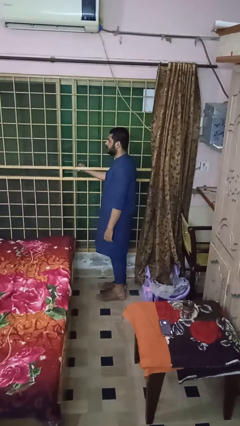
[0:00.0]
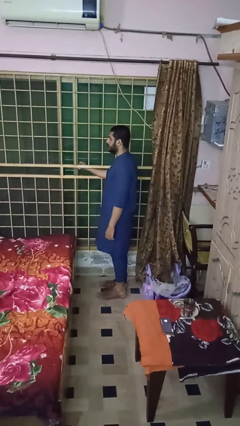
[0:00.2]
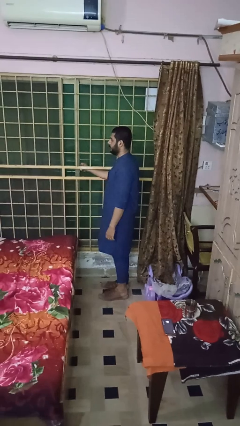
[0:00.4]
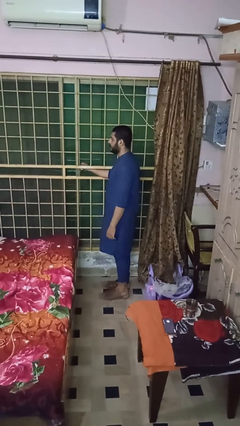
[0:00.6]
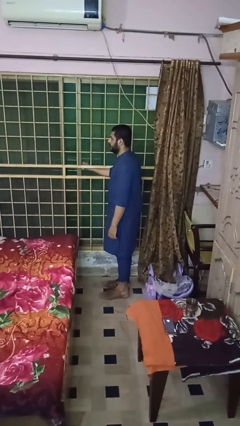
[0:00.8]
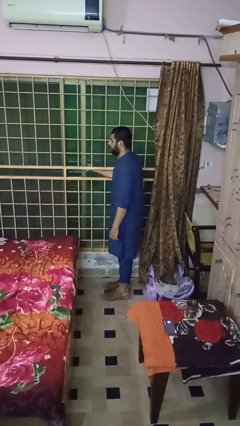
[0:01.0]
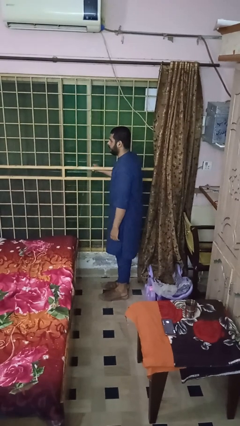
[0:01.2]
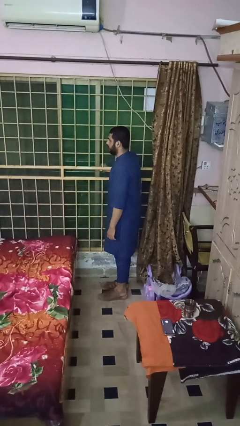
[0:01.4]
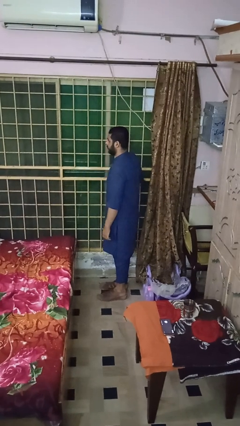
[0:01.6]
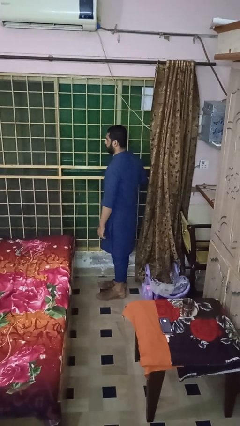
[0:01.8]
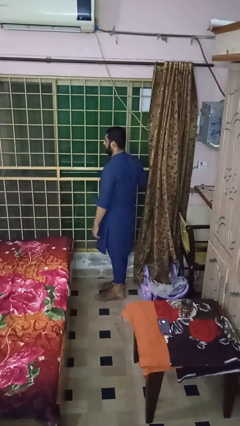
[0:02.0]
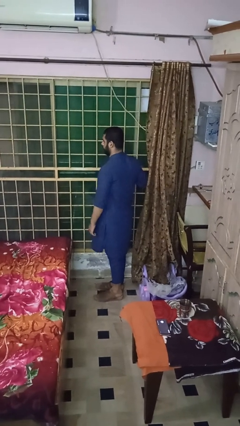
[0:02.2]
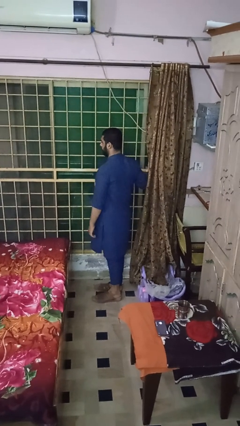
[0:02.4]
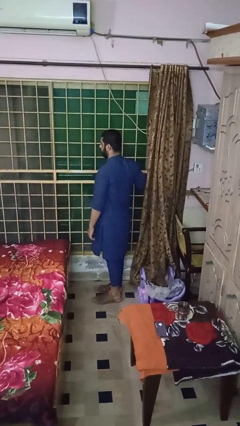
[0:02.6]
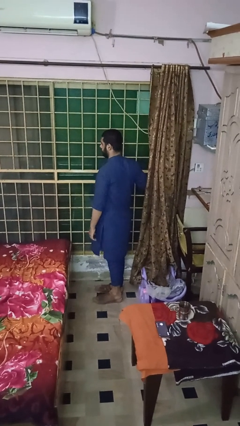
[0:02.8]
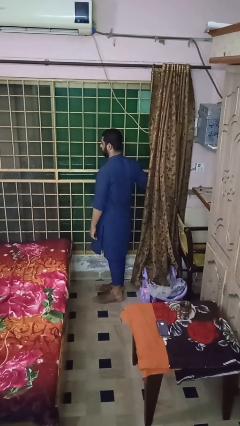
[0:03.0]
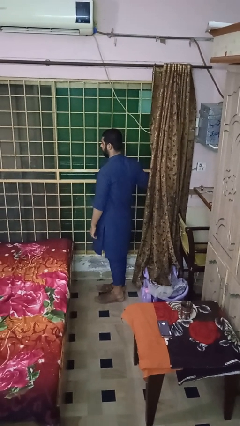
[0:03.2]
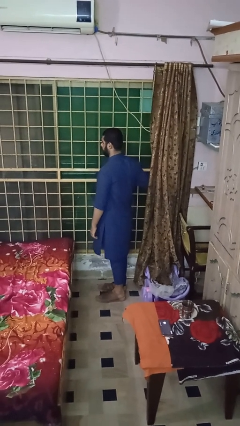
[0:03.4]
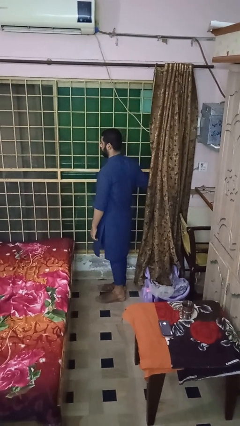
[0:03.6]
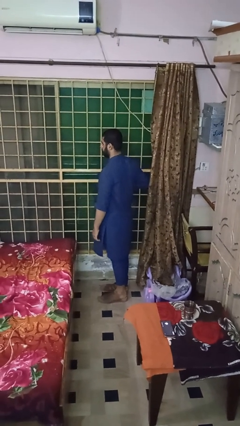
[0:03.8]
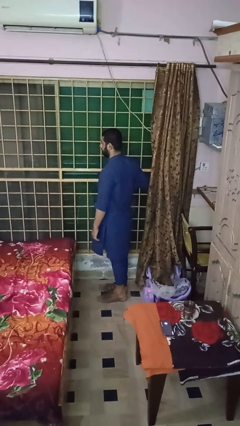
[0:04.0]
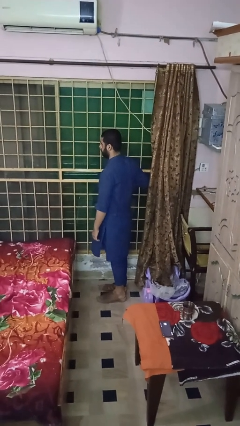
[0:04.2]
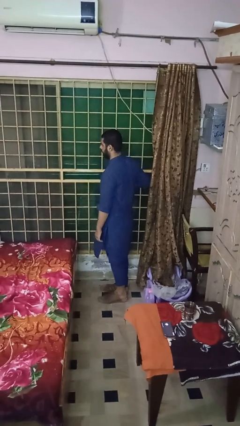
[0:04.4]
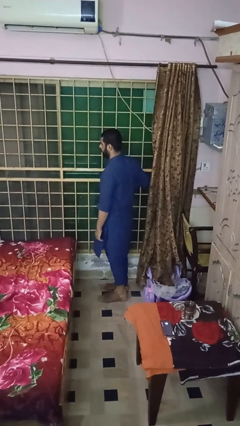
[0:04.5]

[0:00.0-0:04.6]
person opens sliding door

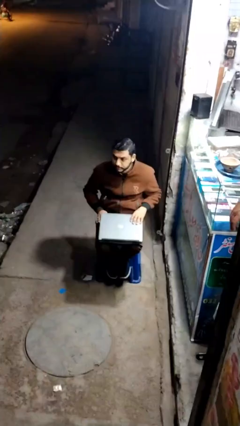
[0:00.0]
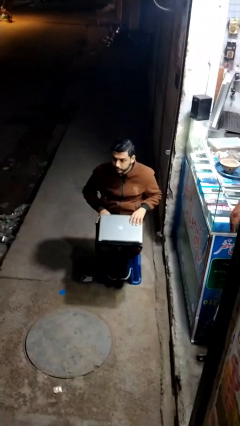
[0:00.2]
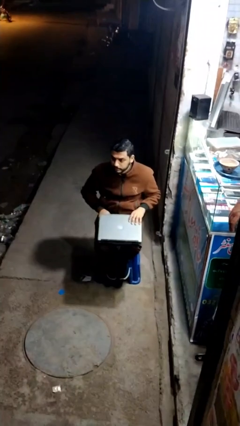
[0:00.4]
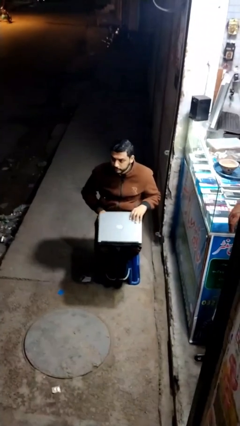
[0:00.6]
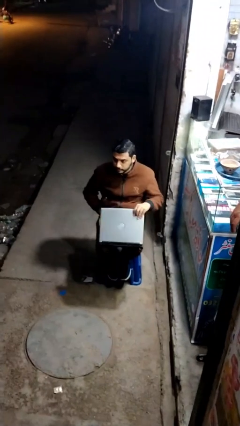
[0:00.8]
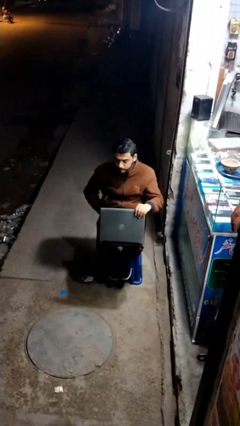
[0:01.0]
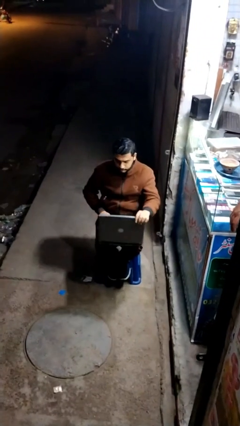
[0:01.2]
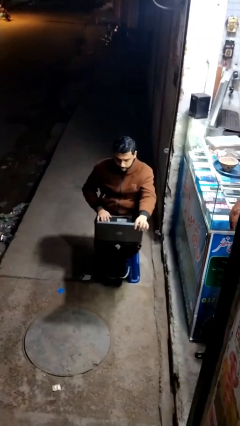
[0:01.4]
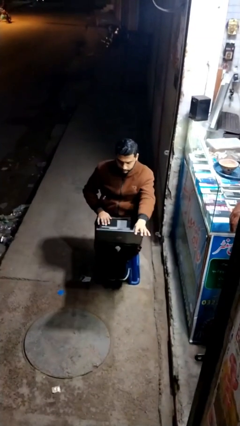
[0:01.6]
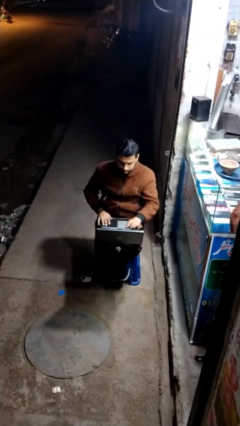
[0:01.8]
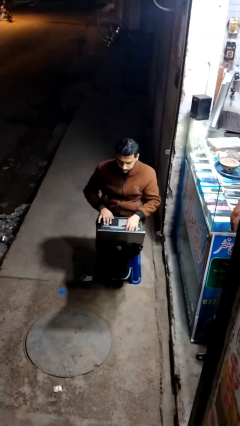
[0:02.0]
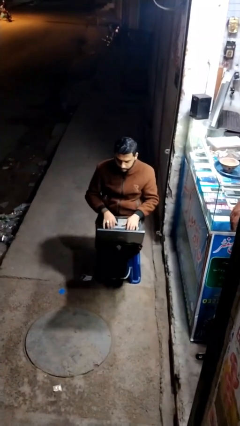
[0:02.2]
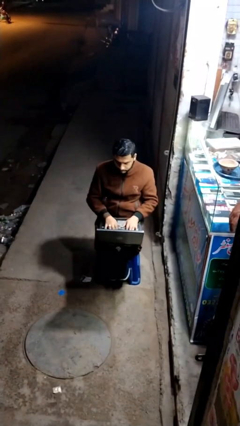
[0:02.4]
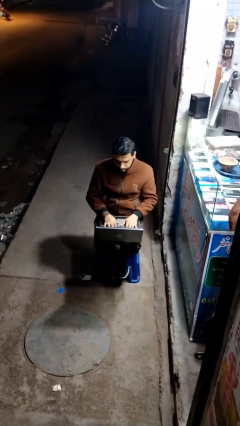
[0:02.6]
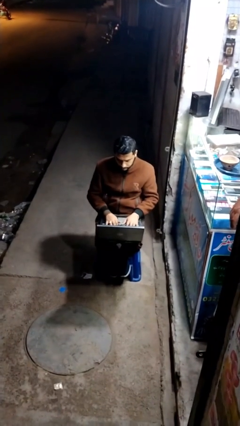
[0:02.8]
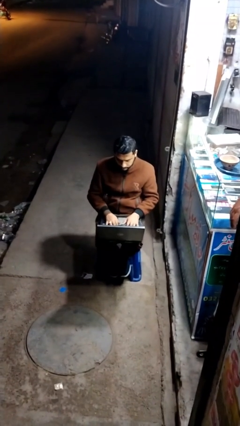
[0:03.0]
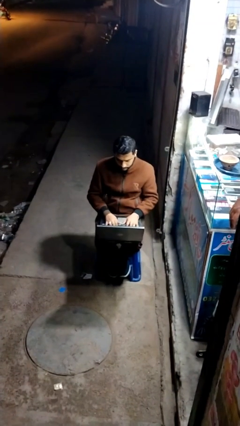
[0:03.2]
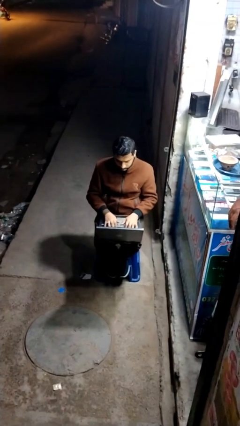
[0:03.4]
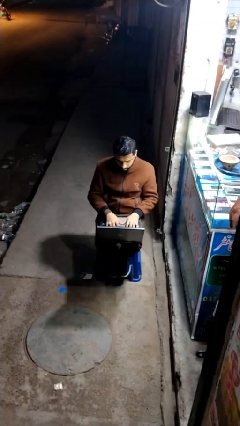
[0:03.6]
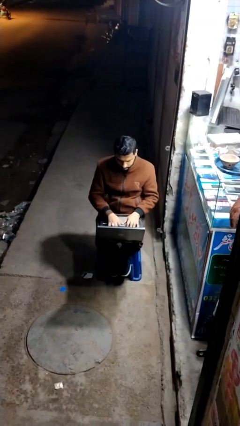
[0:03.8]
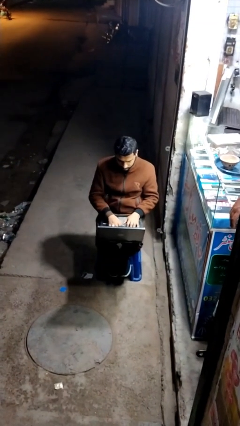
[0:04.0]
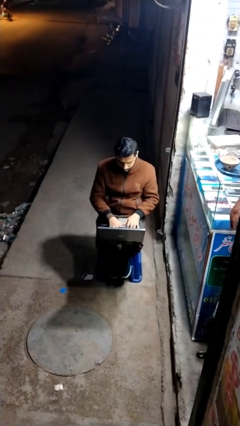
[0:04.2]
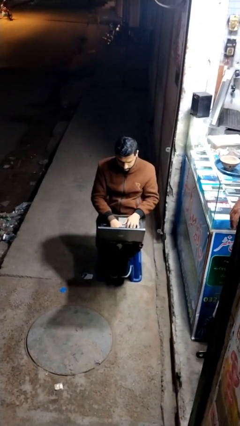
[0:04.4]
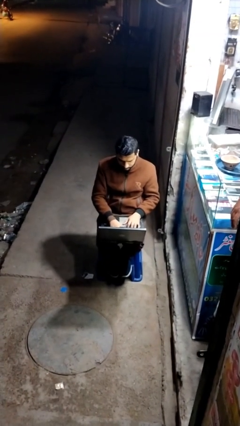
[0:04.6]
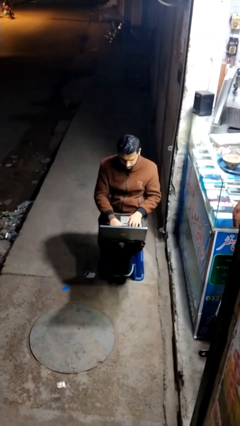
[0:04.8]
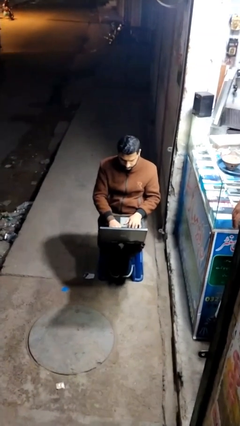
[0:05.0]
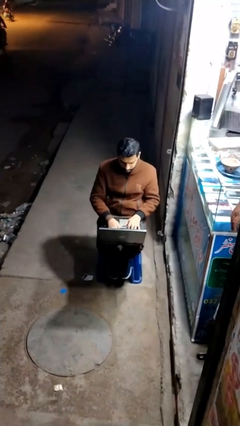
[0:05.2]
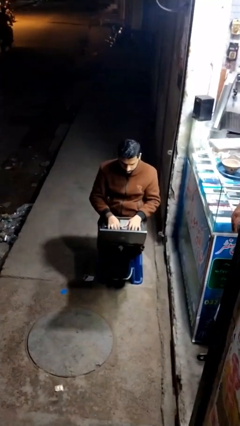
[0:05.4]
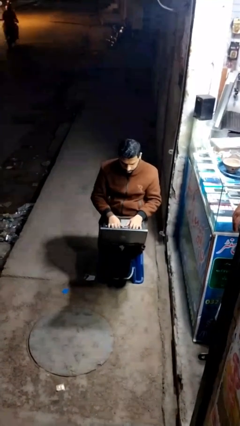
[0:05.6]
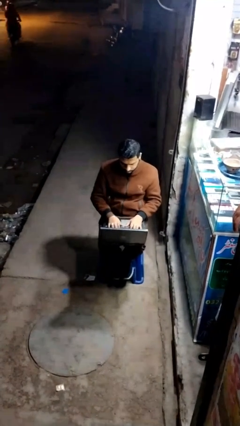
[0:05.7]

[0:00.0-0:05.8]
person interacts with laptop

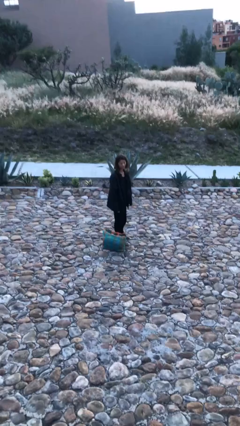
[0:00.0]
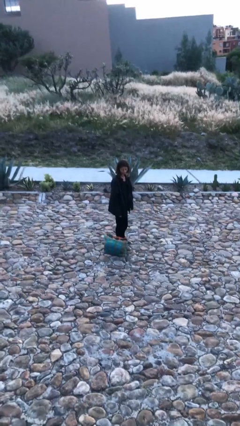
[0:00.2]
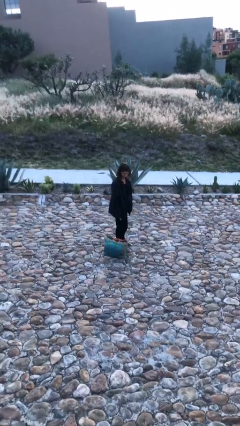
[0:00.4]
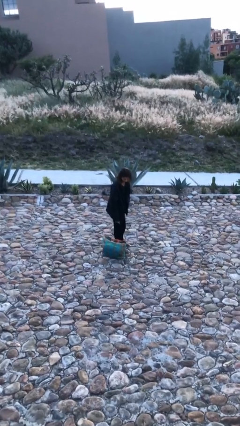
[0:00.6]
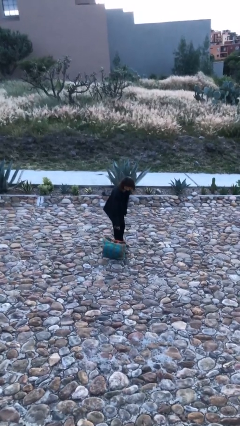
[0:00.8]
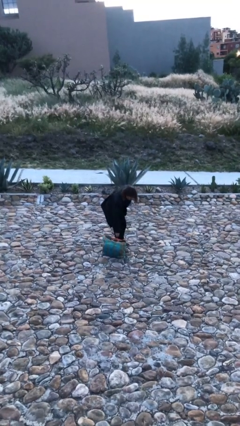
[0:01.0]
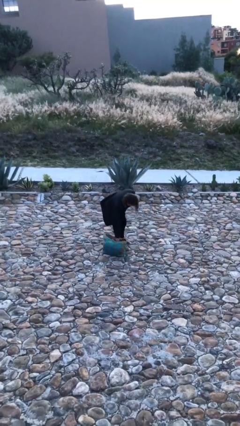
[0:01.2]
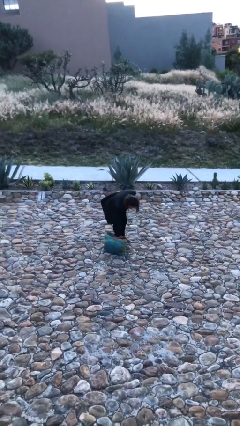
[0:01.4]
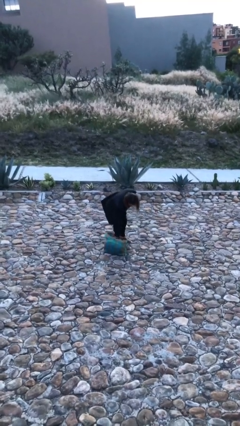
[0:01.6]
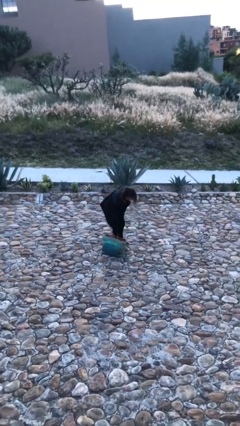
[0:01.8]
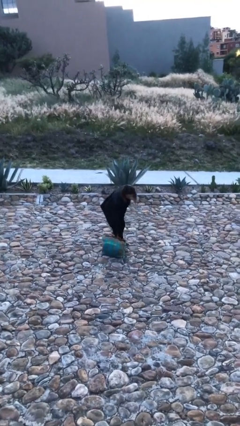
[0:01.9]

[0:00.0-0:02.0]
person picks up object from floor

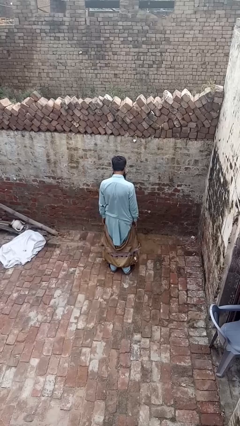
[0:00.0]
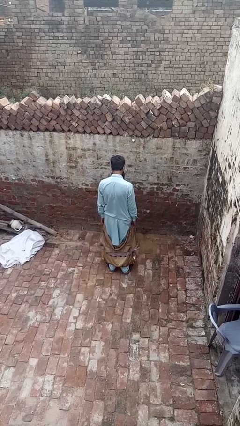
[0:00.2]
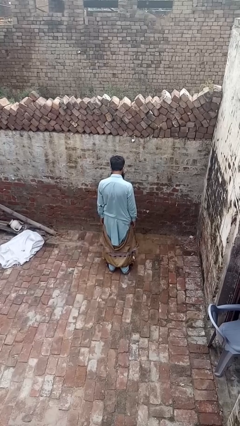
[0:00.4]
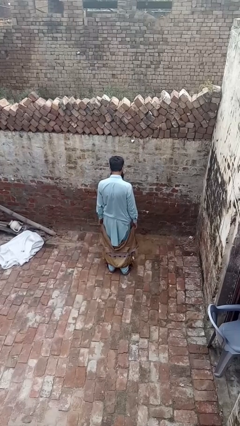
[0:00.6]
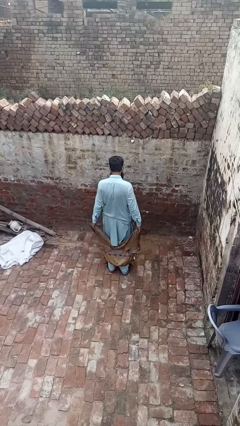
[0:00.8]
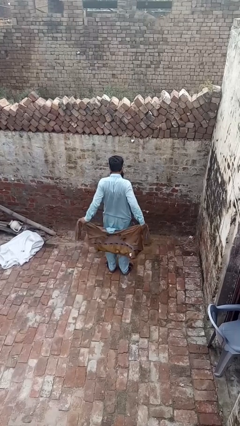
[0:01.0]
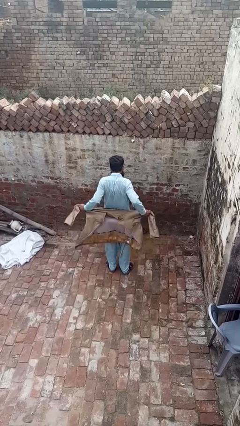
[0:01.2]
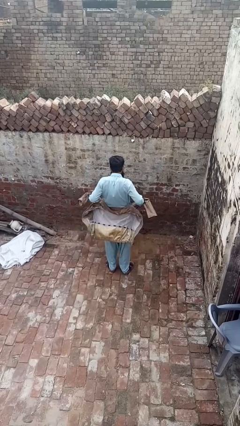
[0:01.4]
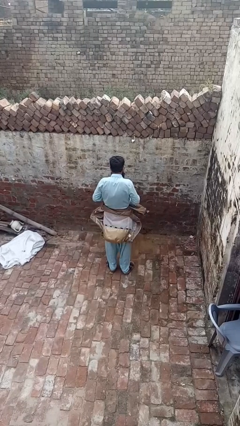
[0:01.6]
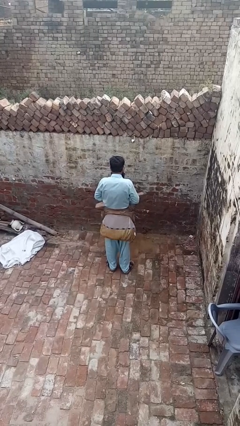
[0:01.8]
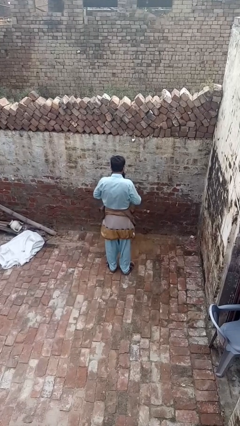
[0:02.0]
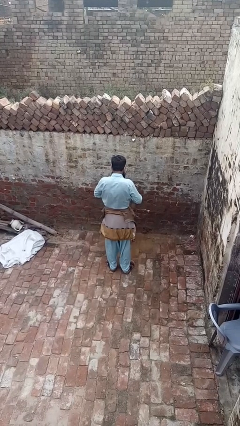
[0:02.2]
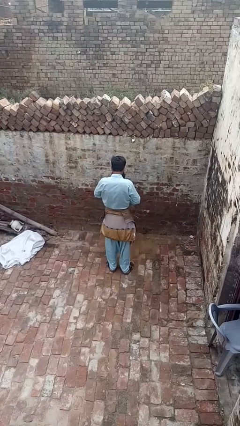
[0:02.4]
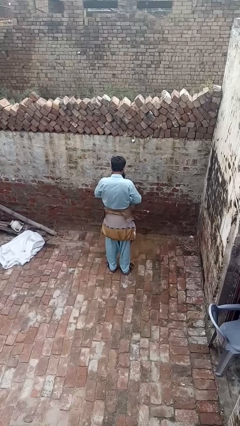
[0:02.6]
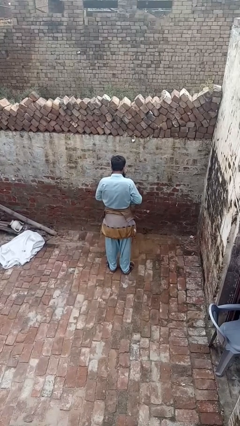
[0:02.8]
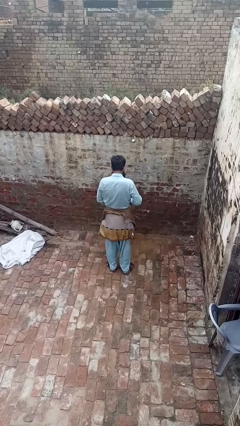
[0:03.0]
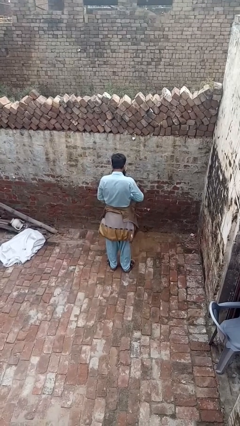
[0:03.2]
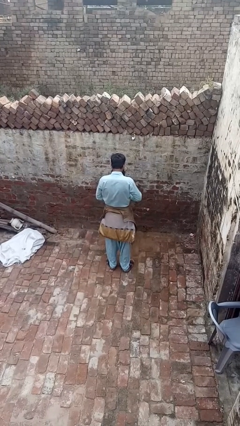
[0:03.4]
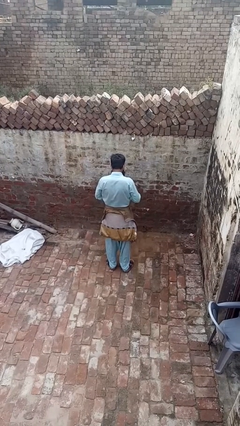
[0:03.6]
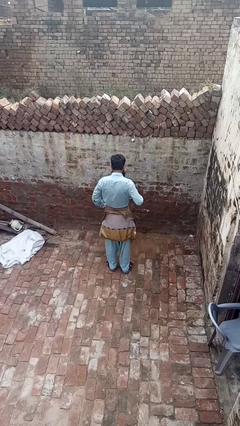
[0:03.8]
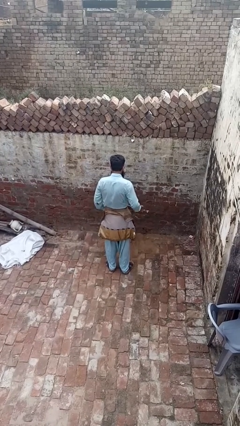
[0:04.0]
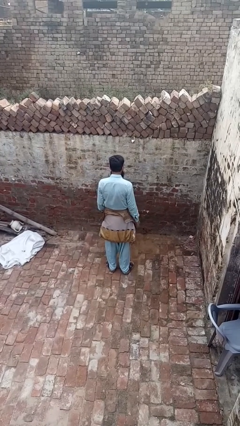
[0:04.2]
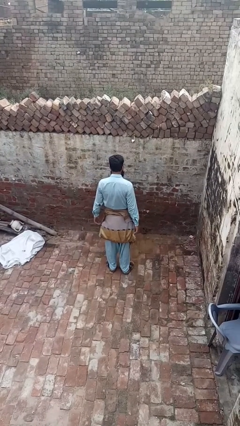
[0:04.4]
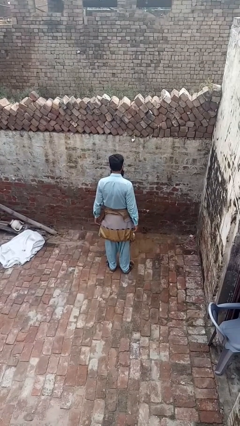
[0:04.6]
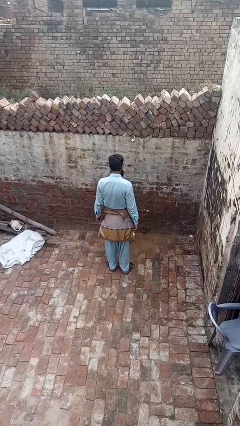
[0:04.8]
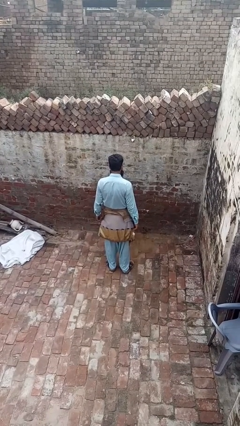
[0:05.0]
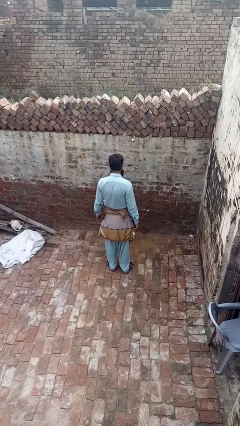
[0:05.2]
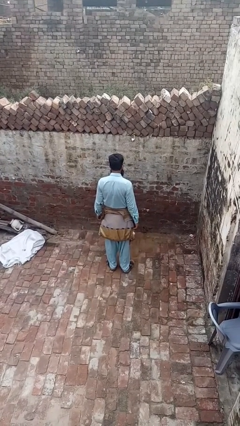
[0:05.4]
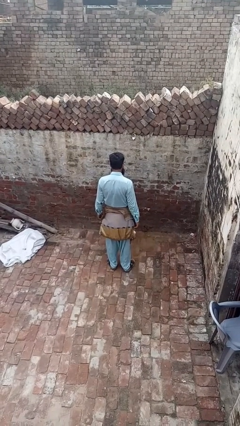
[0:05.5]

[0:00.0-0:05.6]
person ties jacket around waist
